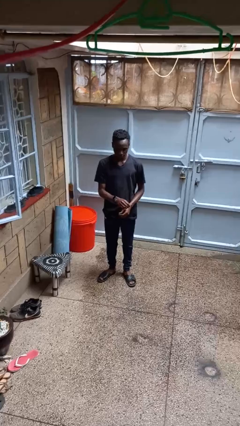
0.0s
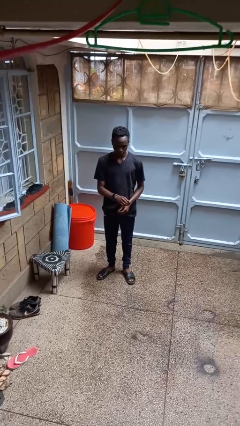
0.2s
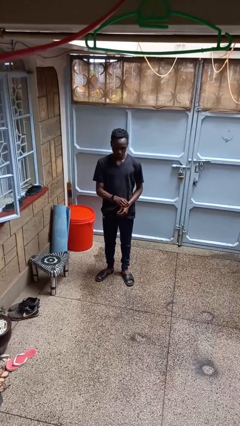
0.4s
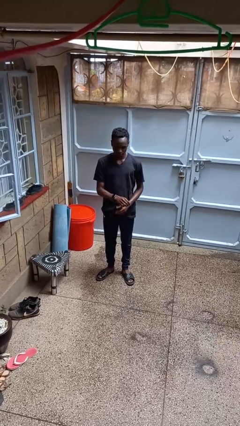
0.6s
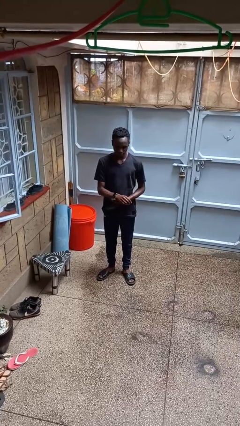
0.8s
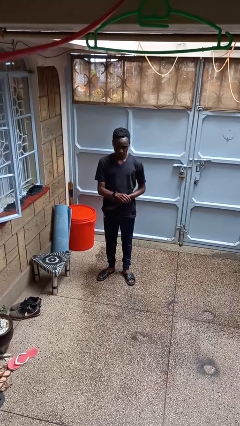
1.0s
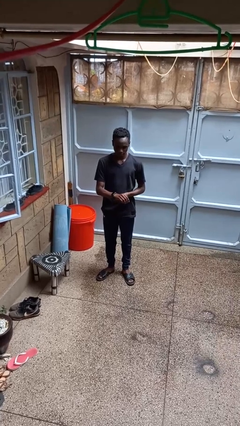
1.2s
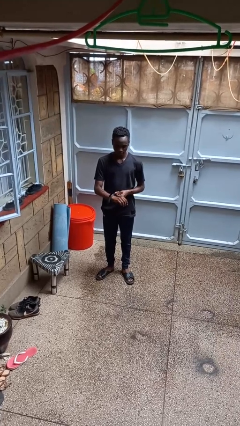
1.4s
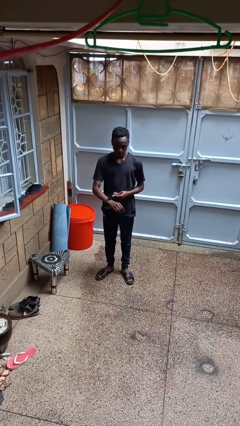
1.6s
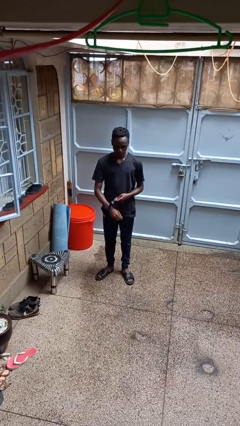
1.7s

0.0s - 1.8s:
person takes off wristwatch

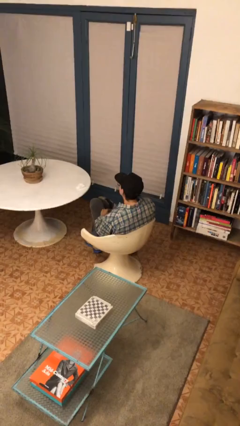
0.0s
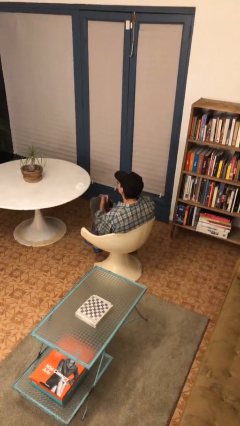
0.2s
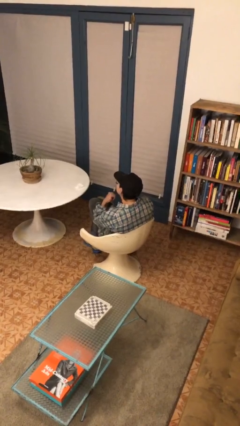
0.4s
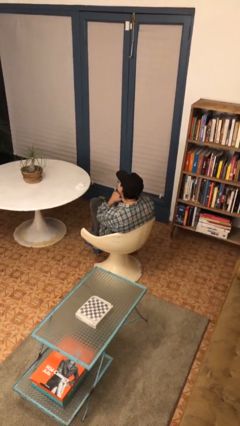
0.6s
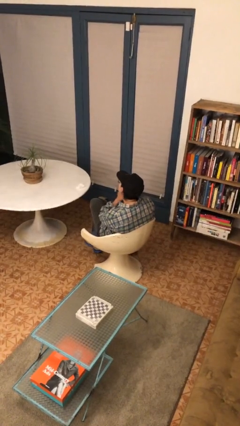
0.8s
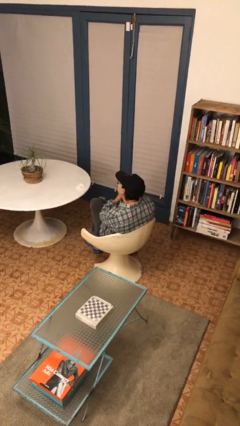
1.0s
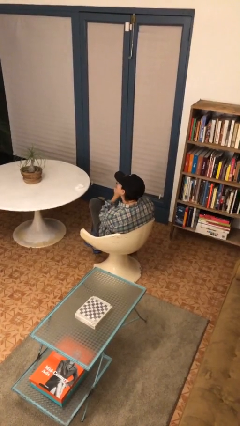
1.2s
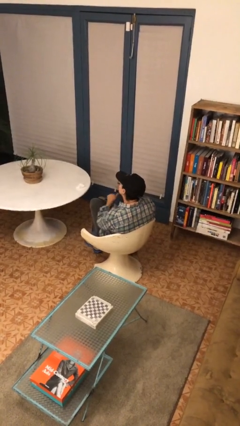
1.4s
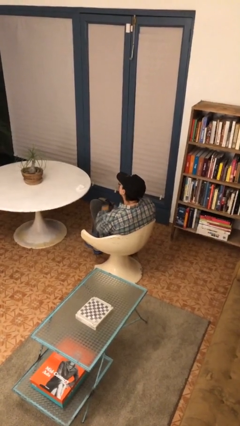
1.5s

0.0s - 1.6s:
person gestures cut

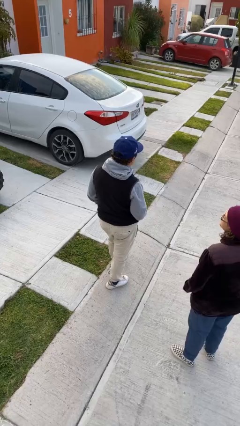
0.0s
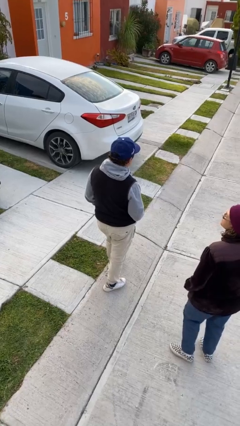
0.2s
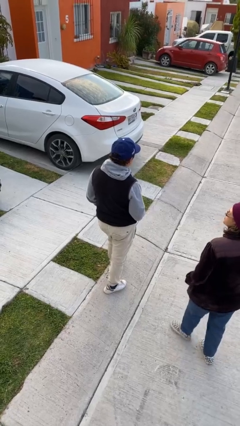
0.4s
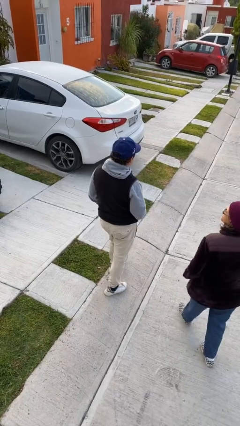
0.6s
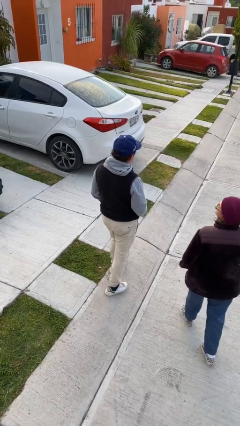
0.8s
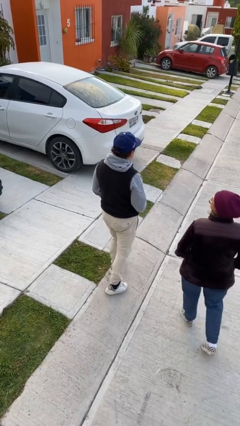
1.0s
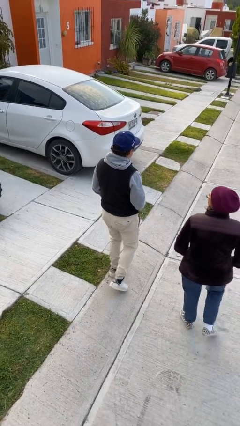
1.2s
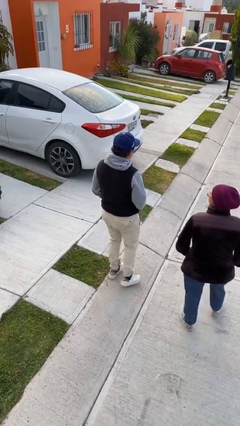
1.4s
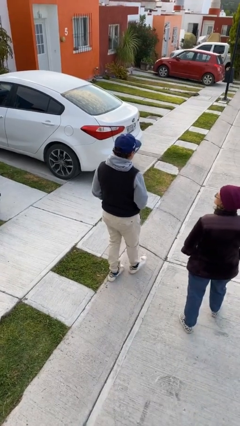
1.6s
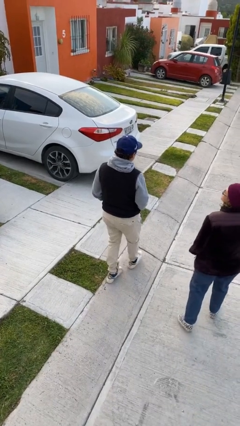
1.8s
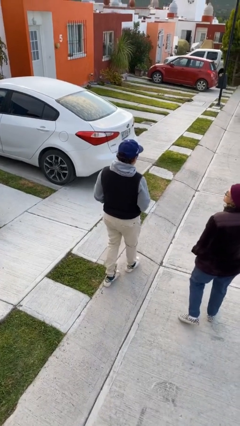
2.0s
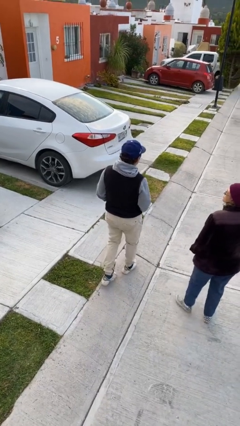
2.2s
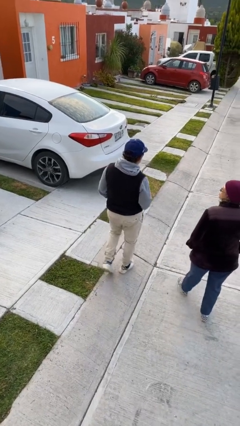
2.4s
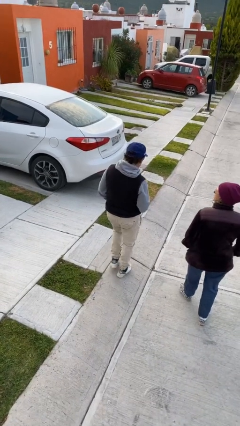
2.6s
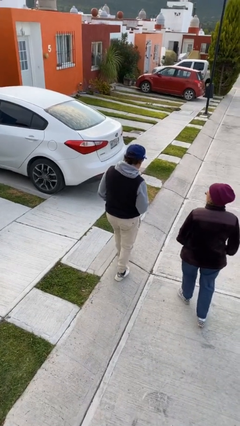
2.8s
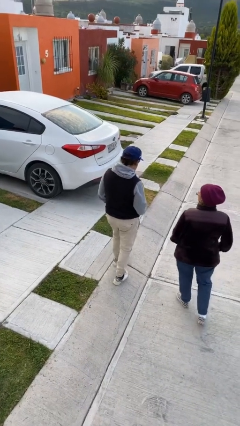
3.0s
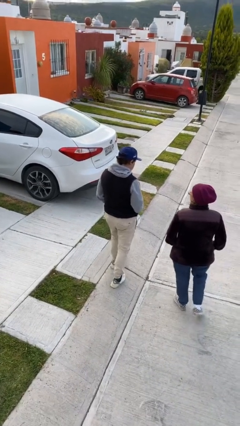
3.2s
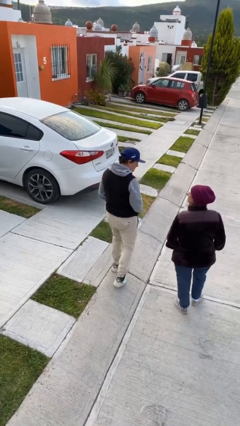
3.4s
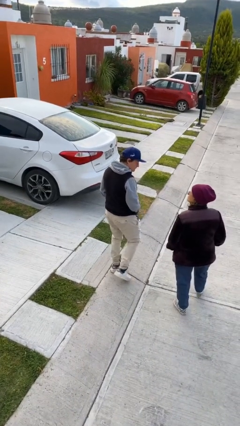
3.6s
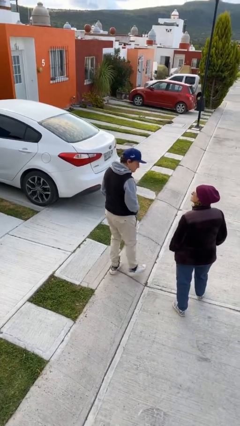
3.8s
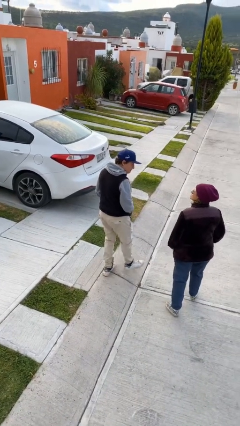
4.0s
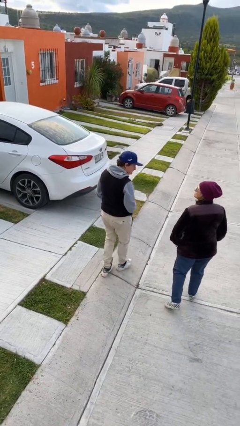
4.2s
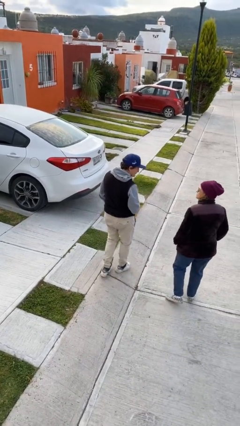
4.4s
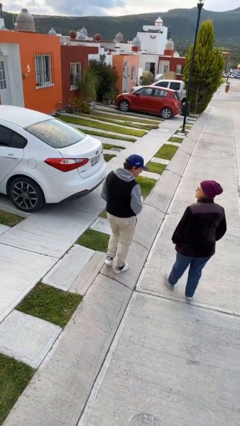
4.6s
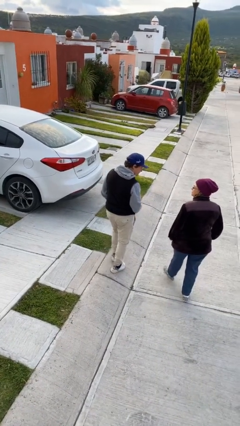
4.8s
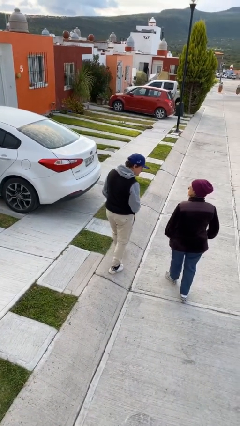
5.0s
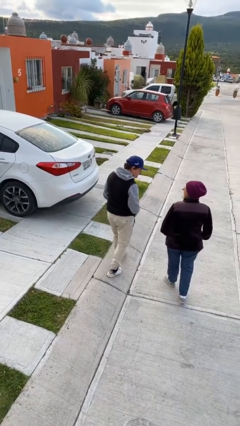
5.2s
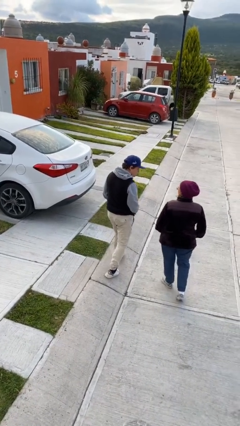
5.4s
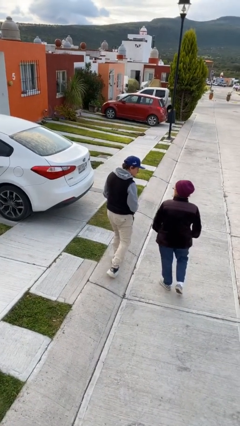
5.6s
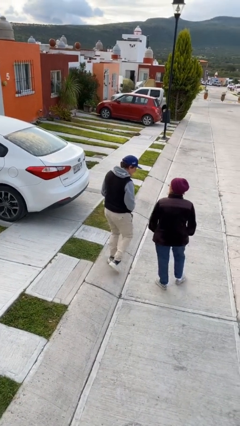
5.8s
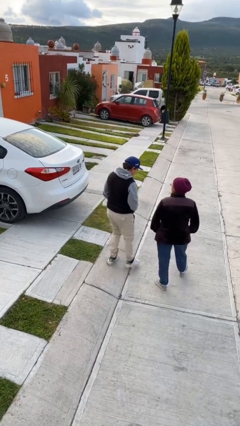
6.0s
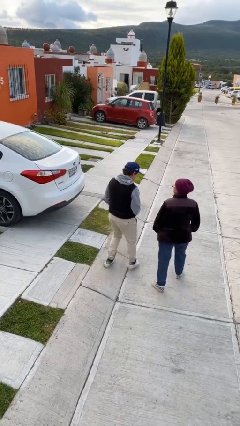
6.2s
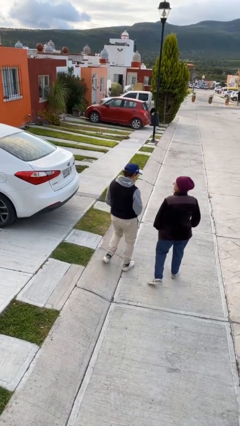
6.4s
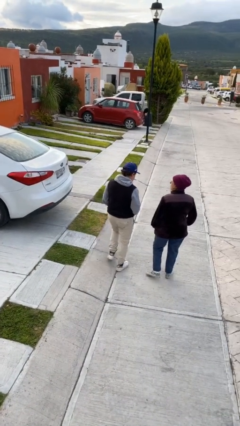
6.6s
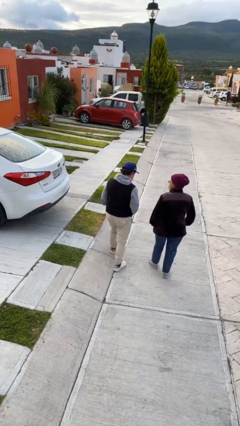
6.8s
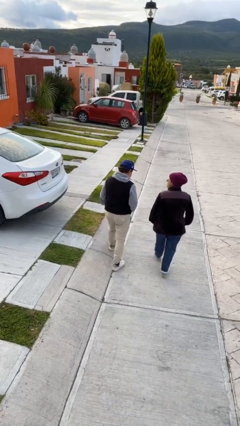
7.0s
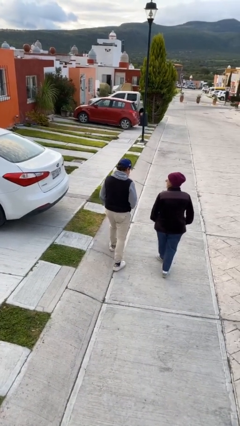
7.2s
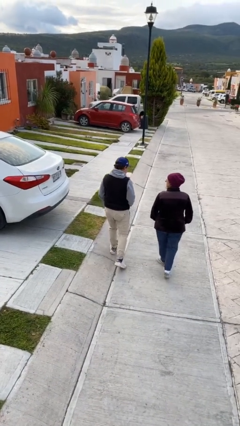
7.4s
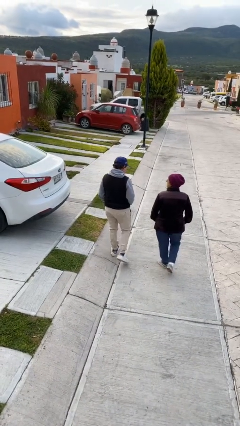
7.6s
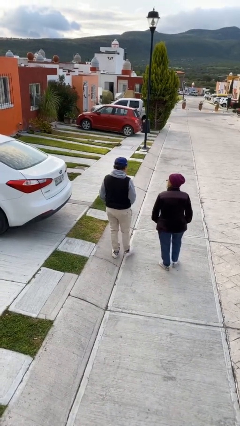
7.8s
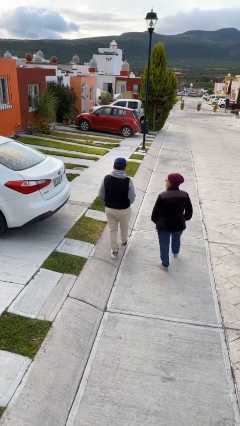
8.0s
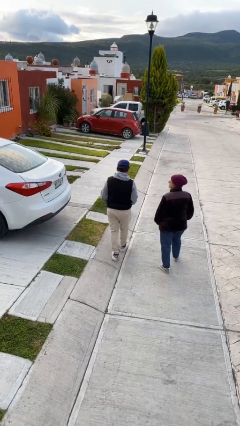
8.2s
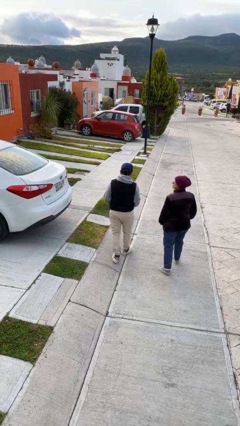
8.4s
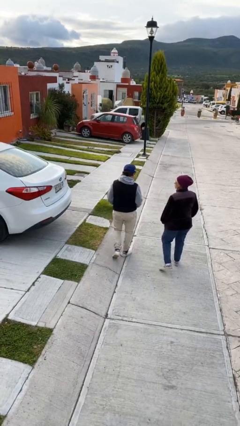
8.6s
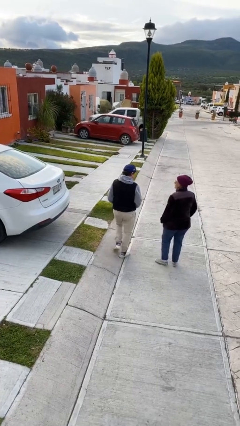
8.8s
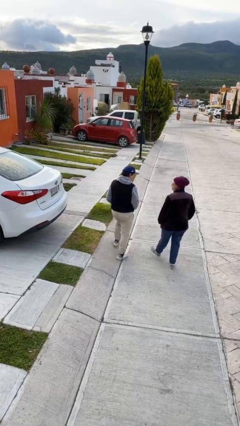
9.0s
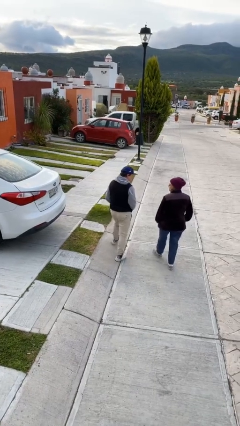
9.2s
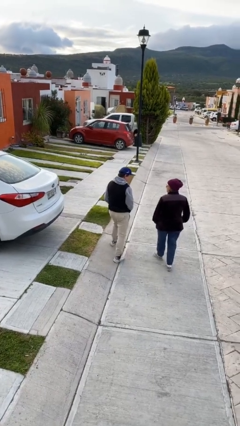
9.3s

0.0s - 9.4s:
person talks to person

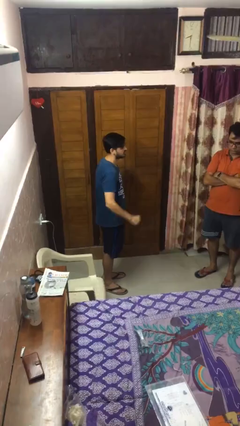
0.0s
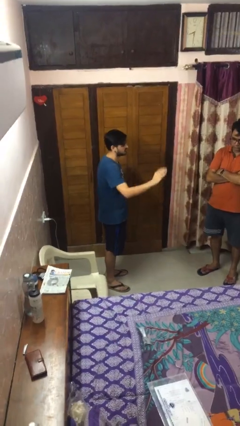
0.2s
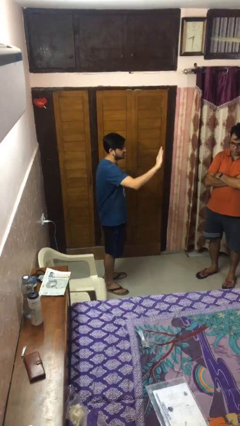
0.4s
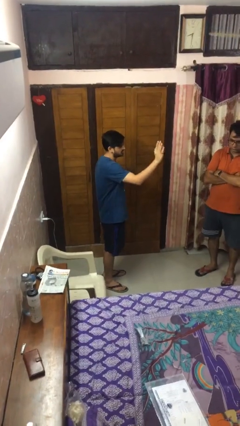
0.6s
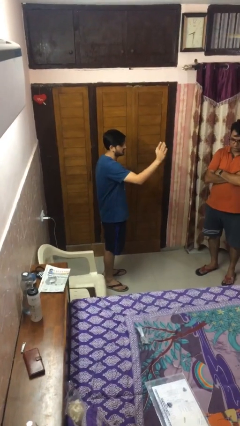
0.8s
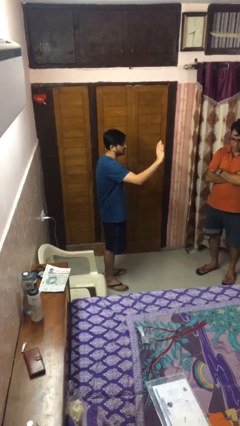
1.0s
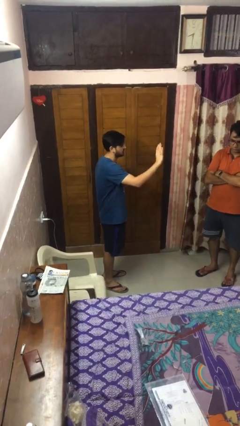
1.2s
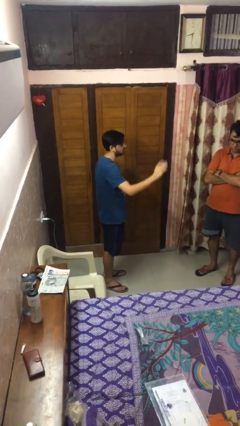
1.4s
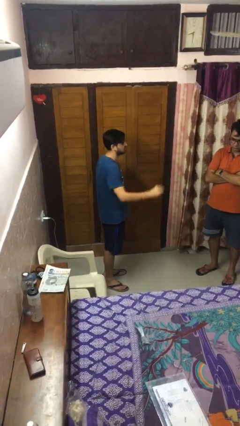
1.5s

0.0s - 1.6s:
person waves at person

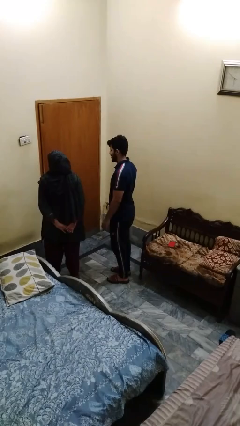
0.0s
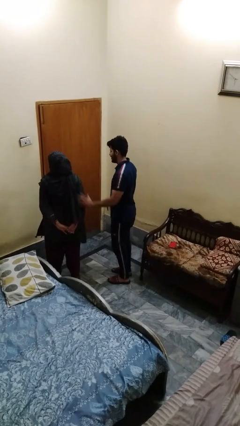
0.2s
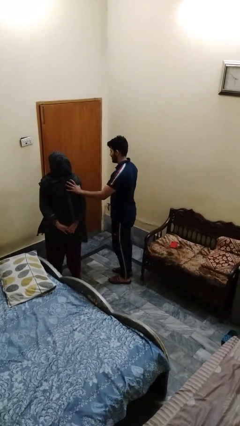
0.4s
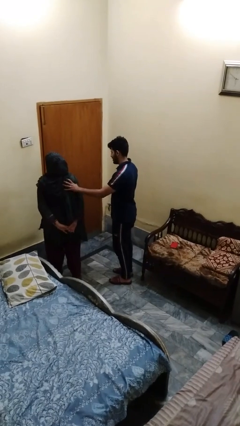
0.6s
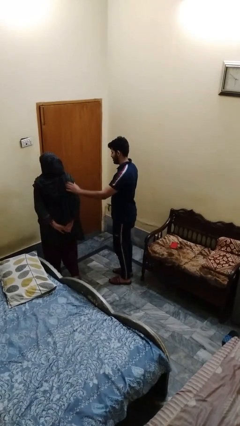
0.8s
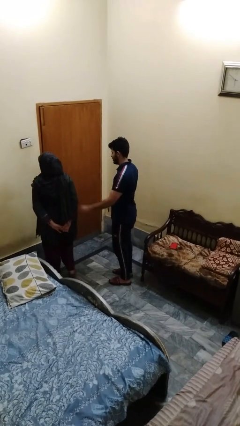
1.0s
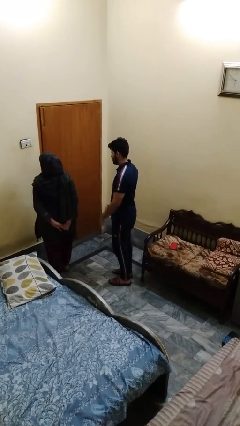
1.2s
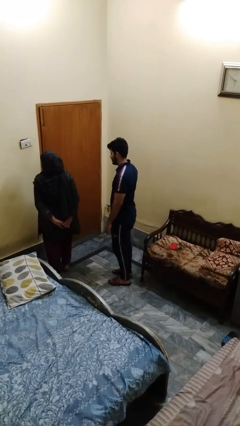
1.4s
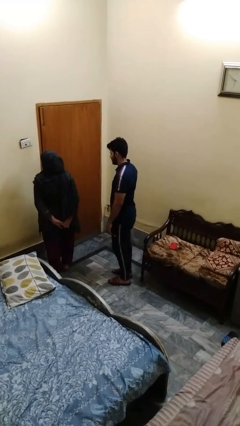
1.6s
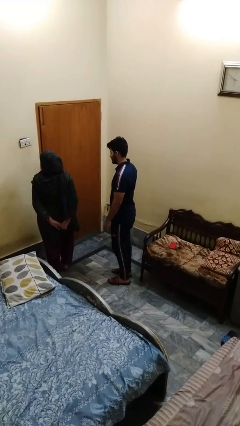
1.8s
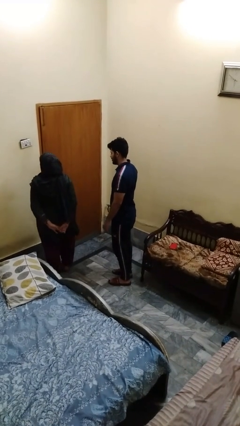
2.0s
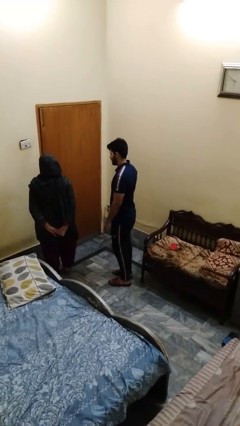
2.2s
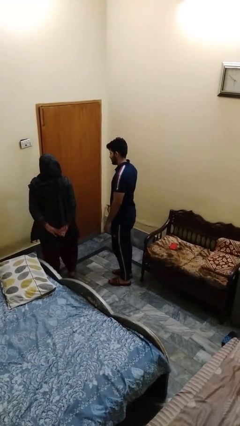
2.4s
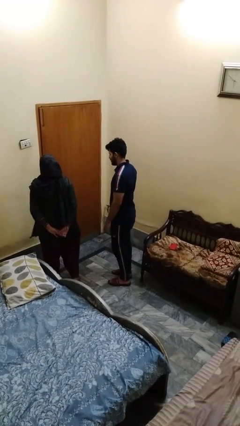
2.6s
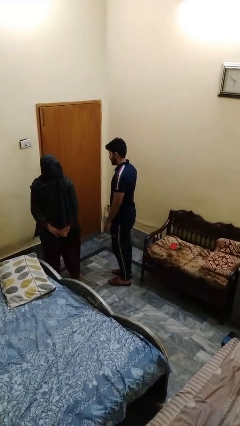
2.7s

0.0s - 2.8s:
person shoves person
